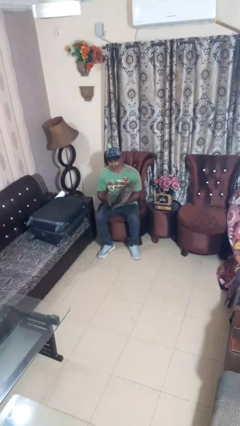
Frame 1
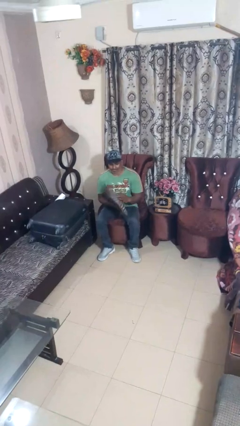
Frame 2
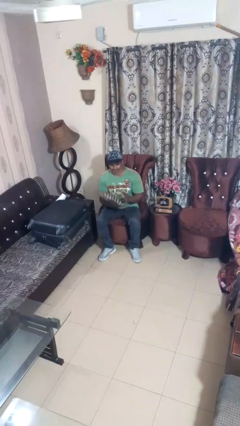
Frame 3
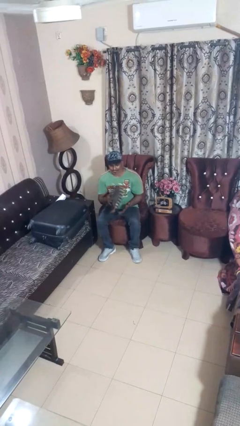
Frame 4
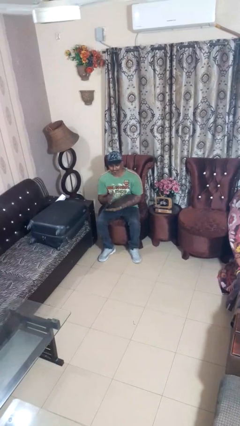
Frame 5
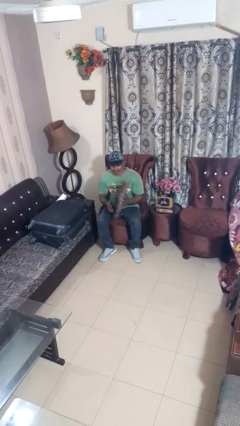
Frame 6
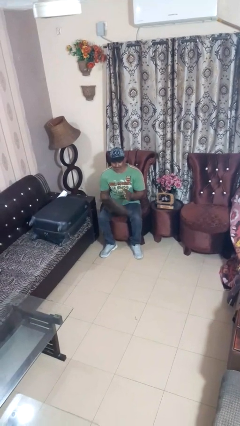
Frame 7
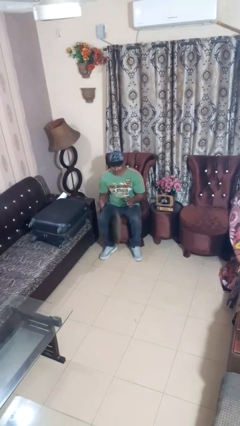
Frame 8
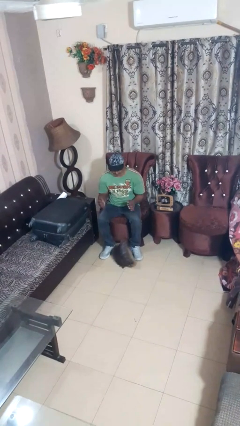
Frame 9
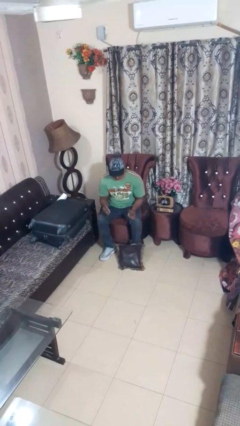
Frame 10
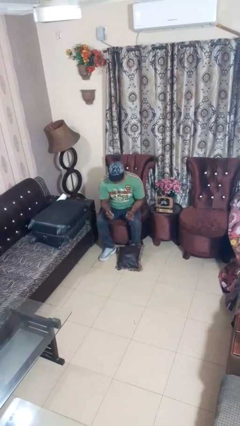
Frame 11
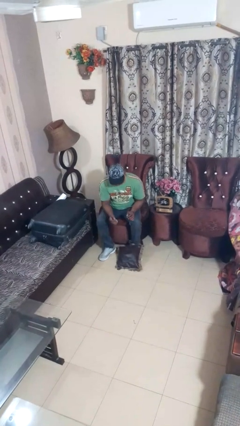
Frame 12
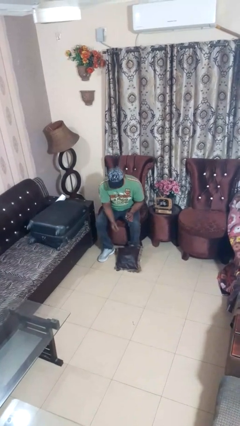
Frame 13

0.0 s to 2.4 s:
person drops object

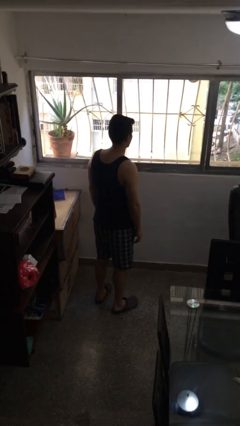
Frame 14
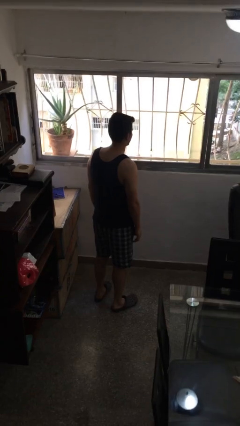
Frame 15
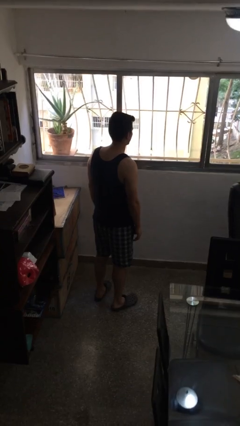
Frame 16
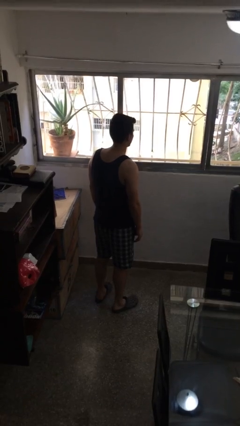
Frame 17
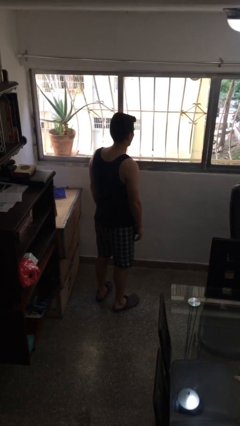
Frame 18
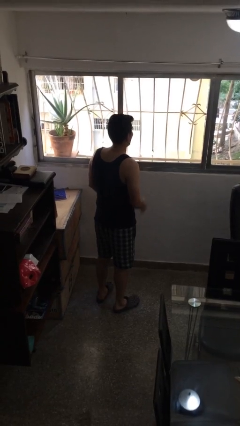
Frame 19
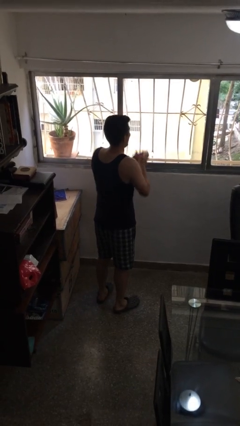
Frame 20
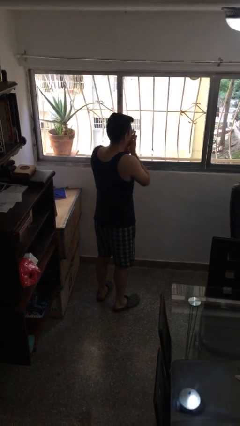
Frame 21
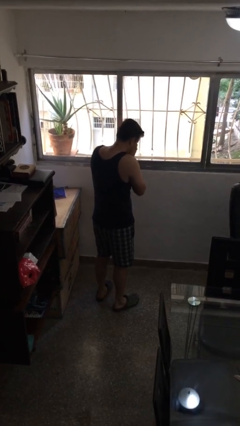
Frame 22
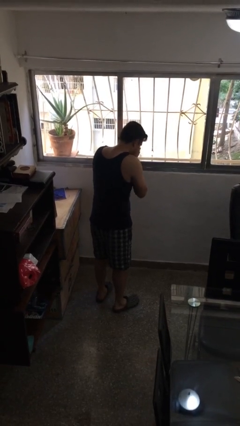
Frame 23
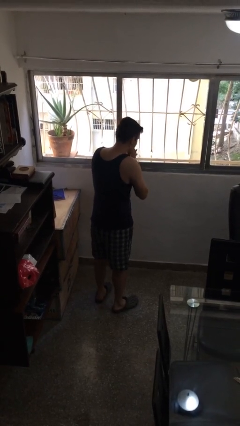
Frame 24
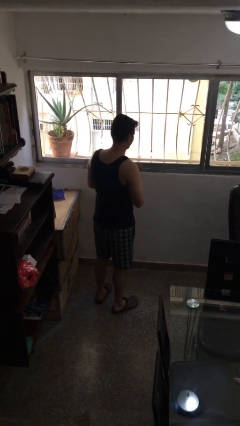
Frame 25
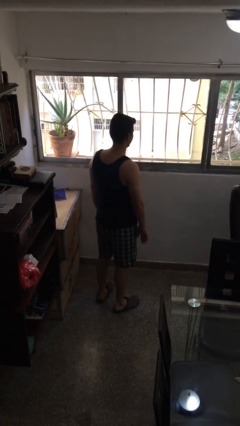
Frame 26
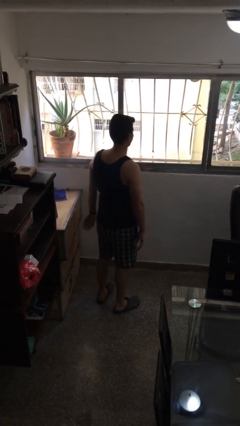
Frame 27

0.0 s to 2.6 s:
person sneezes into hand

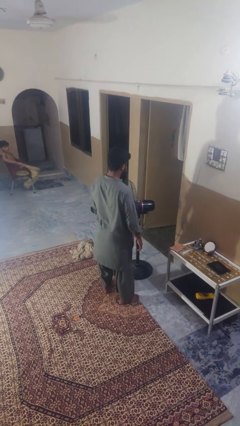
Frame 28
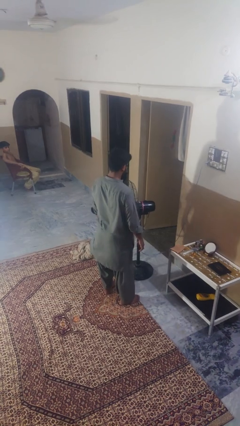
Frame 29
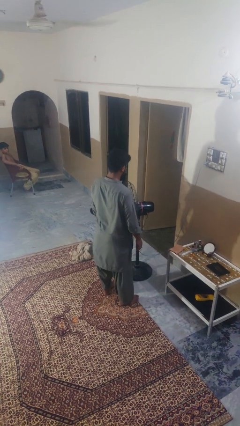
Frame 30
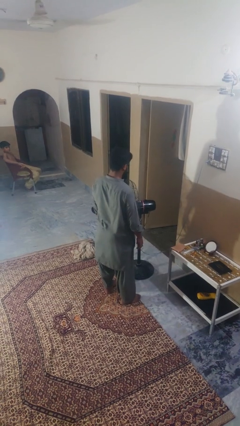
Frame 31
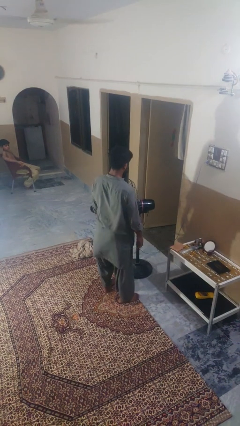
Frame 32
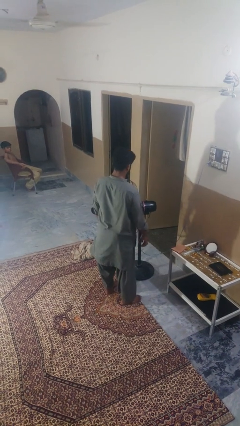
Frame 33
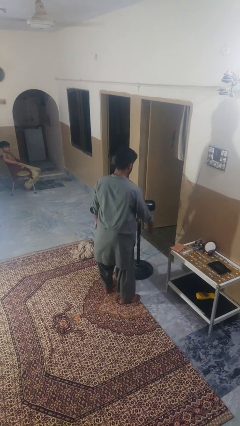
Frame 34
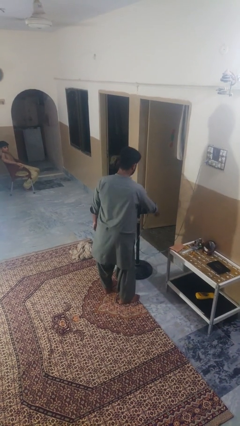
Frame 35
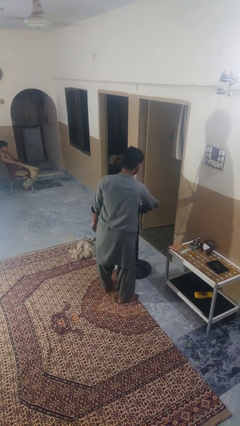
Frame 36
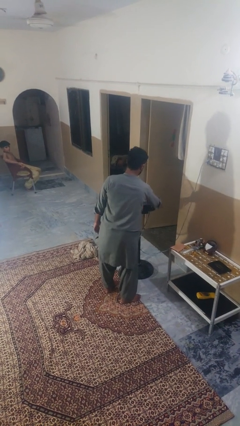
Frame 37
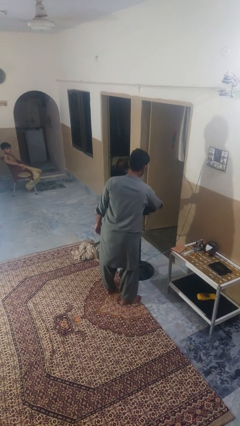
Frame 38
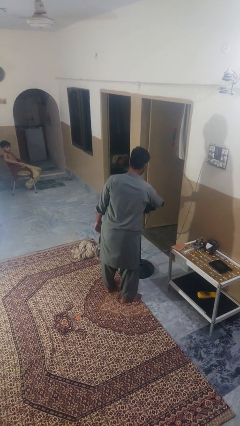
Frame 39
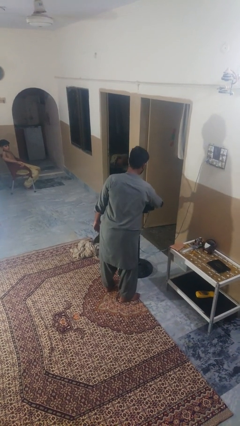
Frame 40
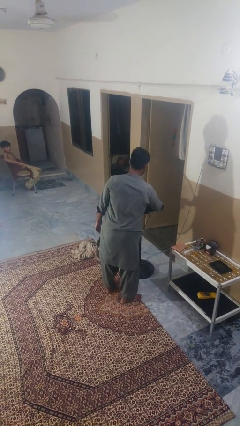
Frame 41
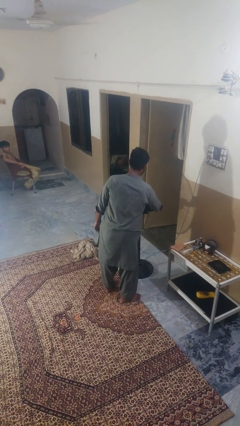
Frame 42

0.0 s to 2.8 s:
person turns off fan

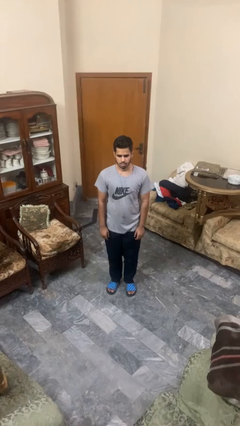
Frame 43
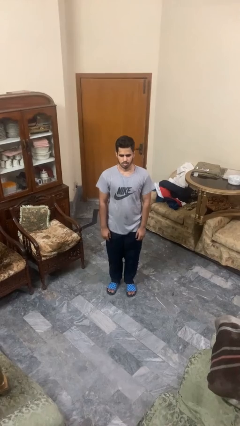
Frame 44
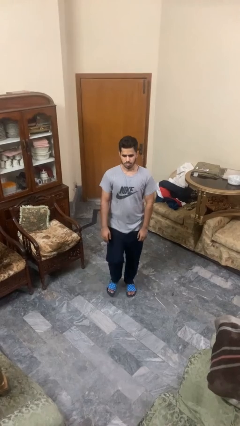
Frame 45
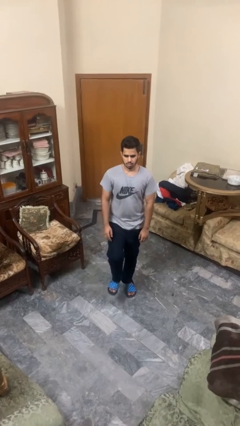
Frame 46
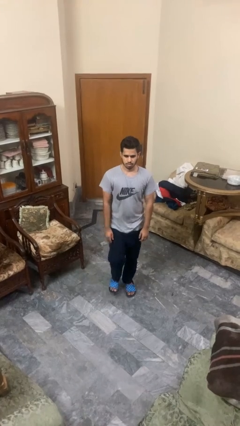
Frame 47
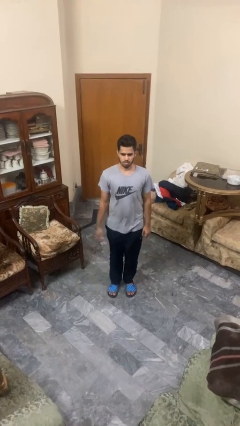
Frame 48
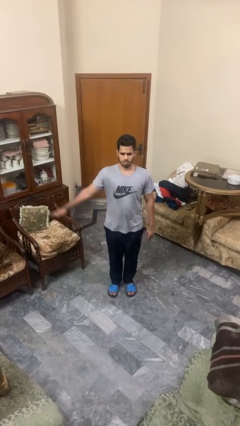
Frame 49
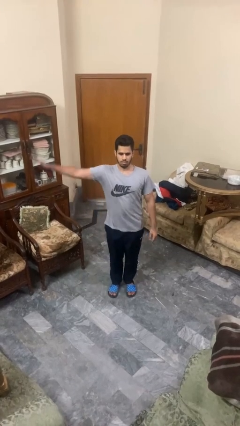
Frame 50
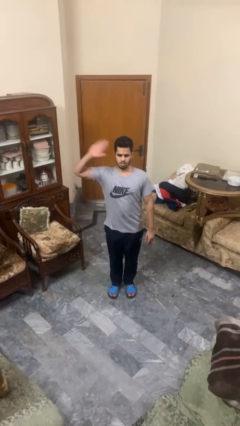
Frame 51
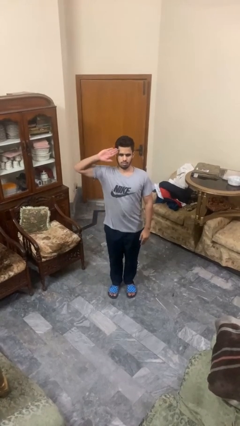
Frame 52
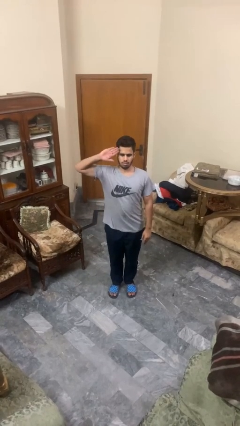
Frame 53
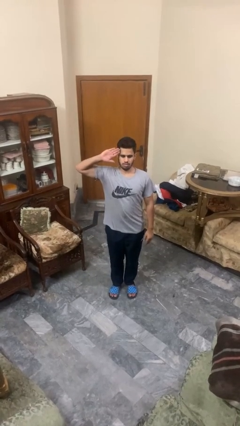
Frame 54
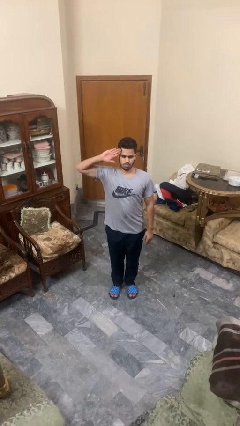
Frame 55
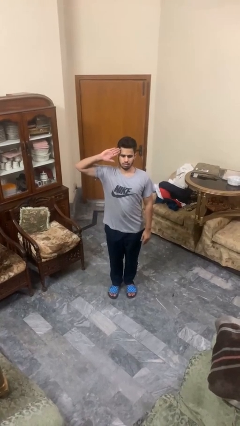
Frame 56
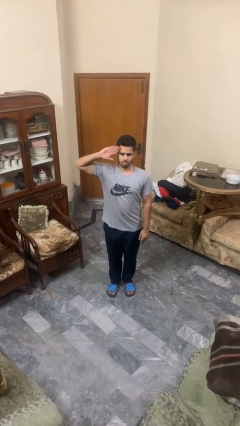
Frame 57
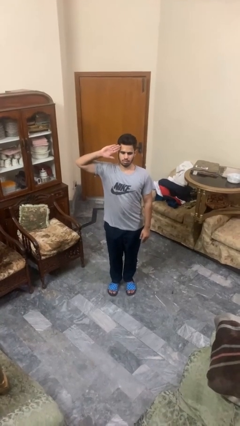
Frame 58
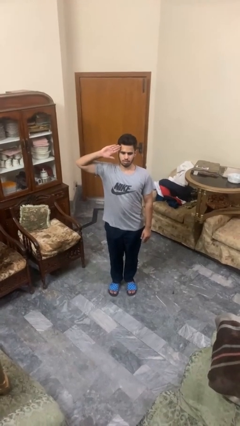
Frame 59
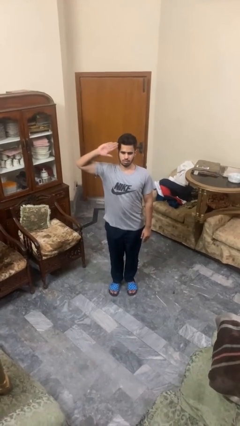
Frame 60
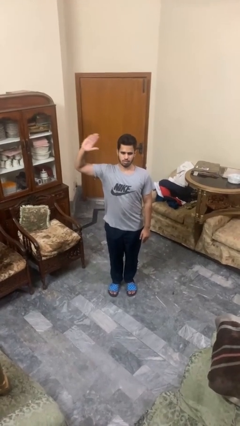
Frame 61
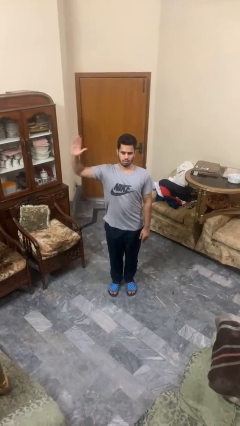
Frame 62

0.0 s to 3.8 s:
person salutes

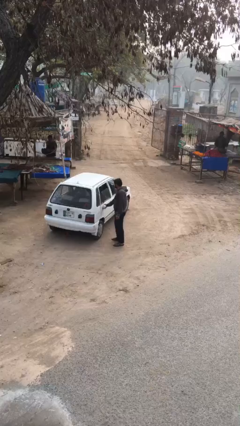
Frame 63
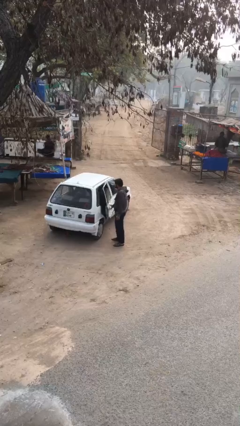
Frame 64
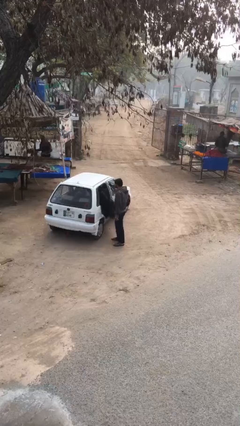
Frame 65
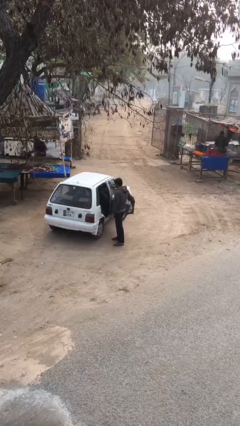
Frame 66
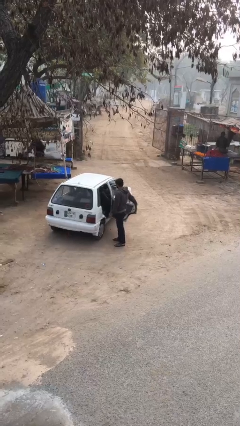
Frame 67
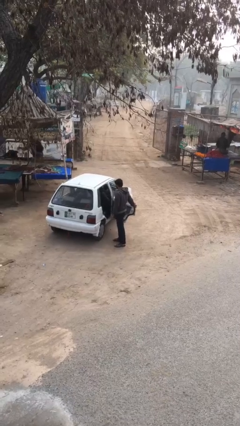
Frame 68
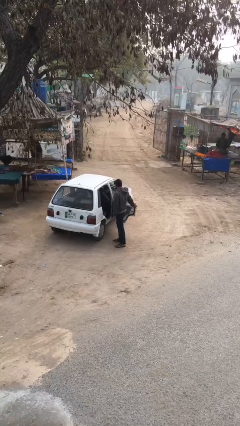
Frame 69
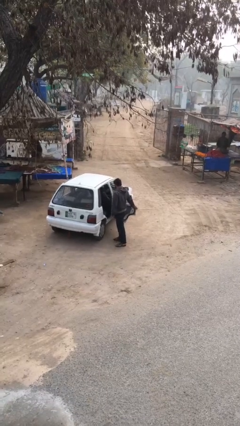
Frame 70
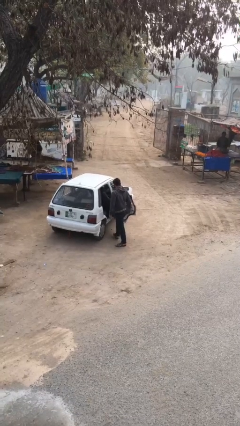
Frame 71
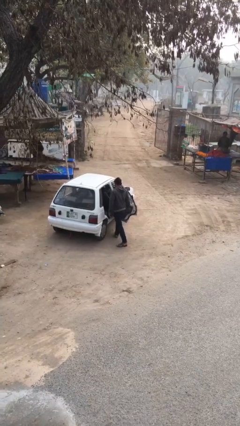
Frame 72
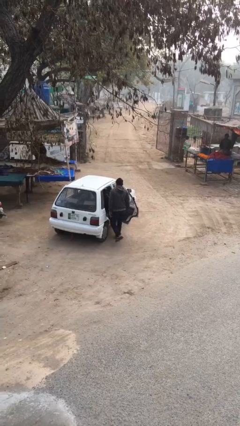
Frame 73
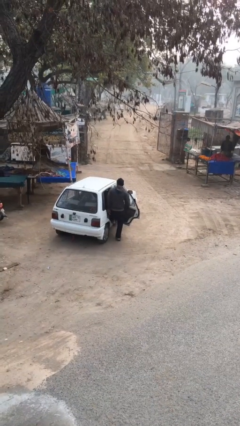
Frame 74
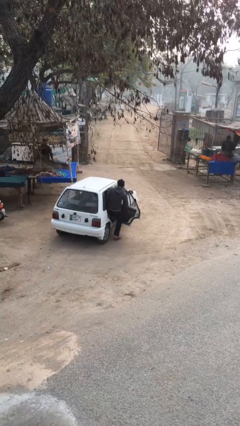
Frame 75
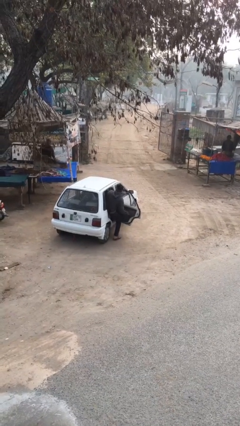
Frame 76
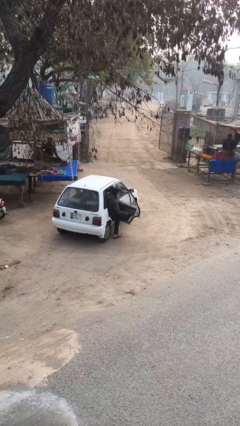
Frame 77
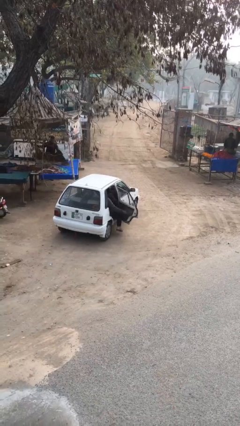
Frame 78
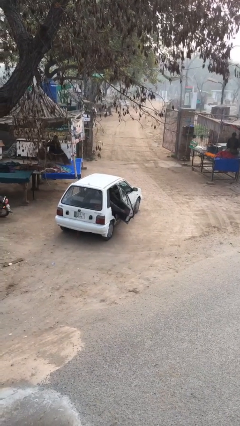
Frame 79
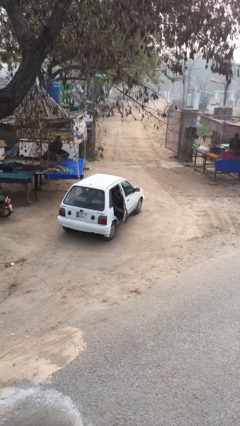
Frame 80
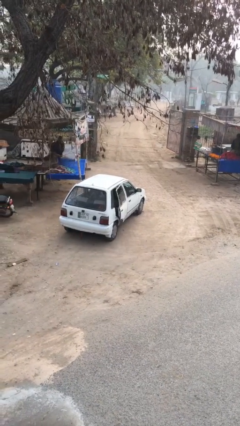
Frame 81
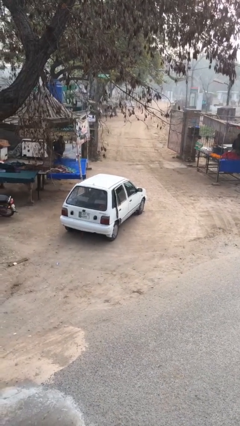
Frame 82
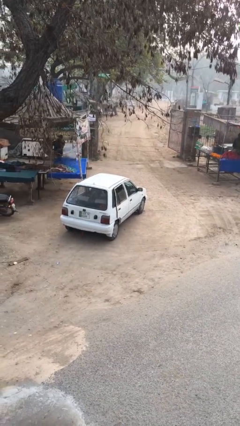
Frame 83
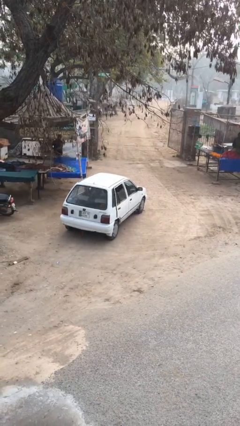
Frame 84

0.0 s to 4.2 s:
car picks up person

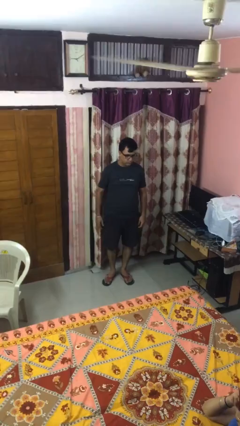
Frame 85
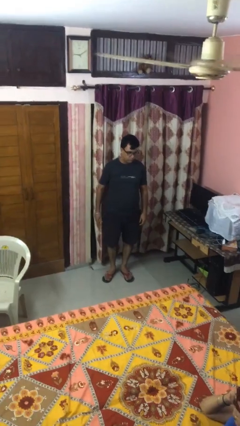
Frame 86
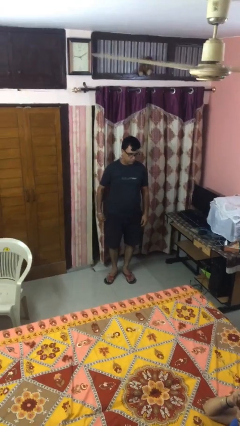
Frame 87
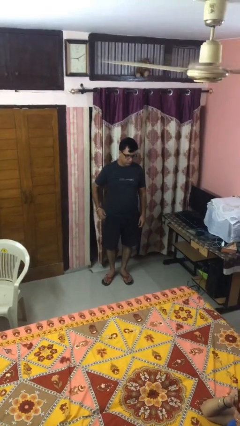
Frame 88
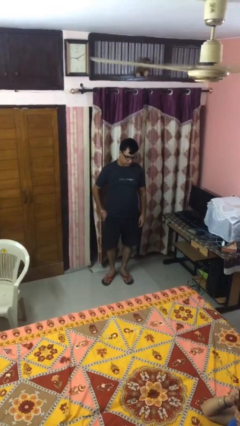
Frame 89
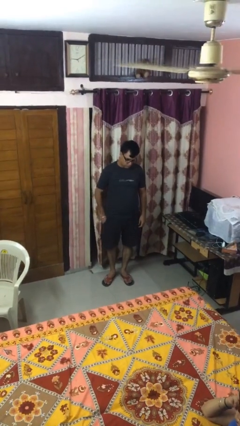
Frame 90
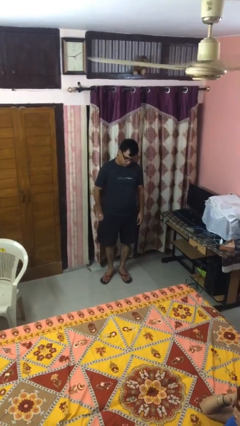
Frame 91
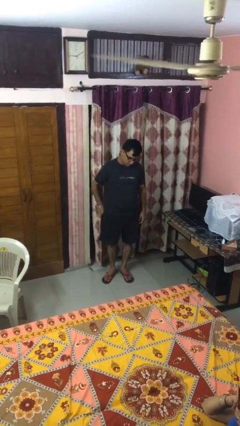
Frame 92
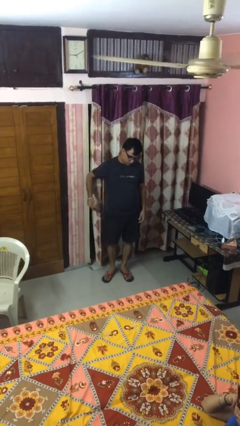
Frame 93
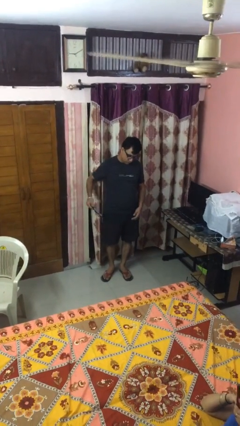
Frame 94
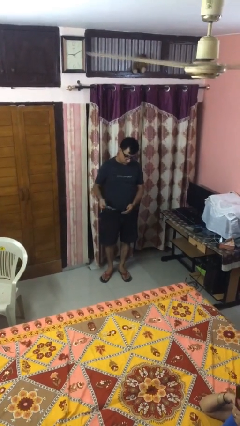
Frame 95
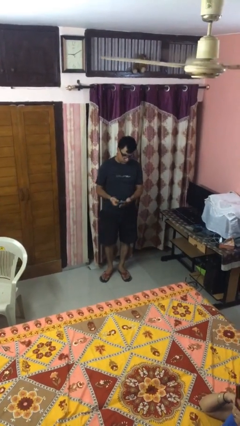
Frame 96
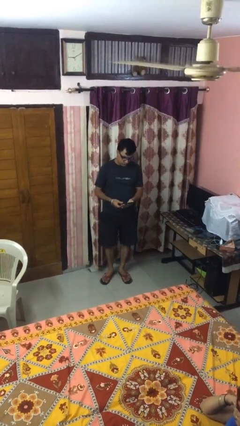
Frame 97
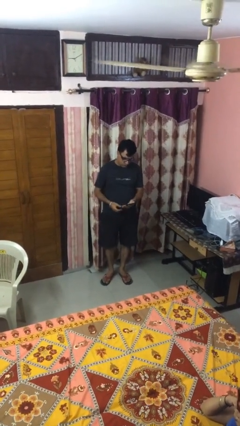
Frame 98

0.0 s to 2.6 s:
person takes phone from pocket
